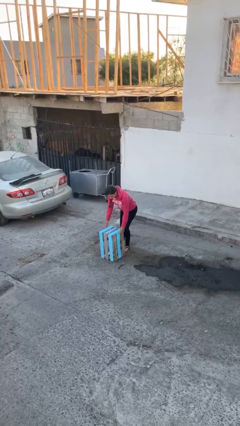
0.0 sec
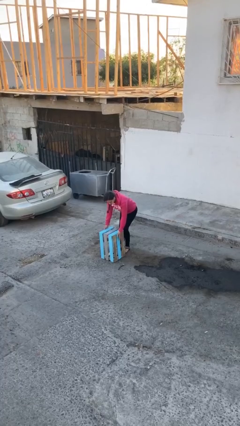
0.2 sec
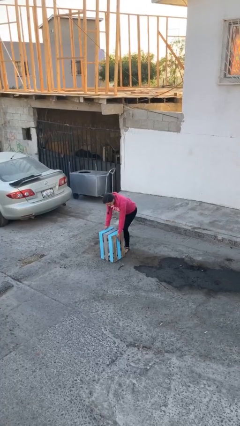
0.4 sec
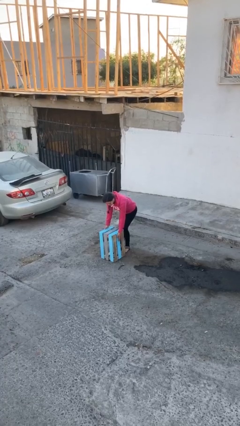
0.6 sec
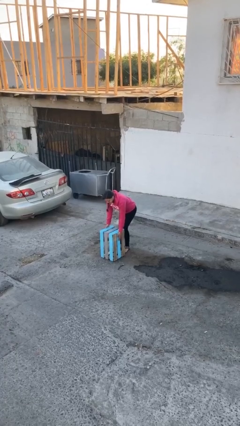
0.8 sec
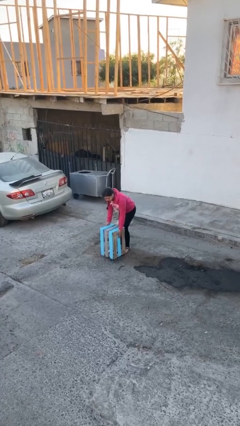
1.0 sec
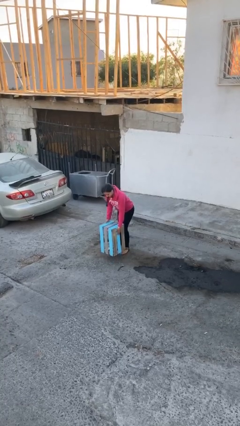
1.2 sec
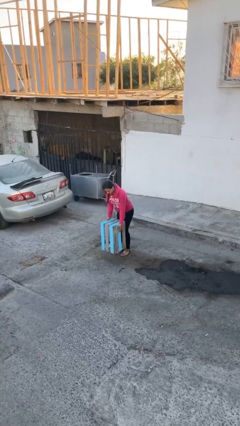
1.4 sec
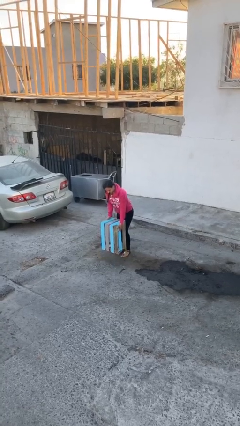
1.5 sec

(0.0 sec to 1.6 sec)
person picks up object from floor

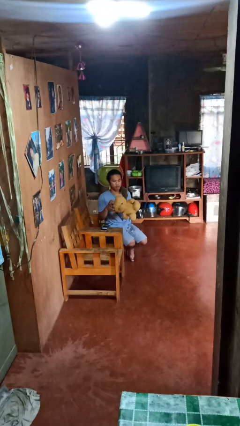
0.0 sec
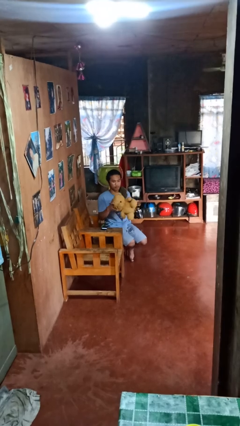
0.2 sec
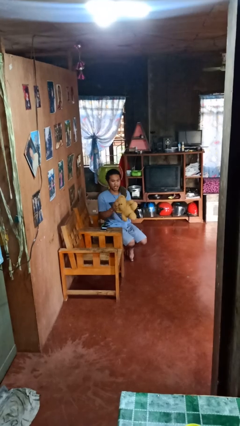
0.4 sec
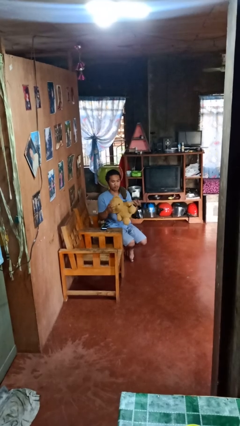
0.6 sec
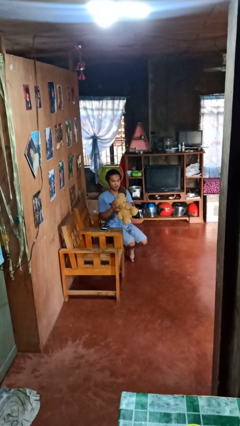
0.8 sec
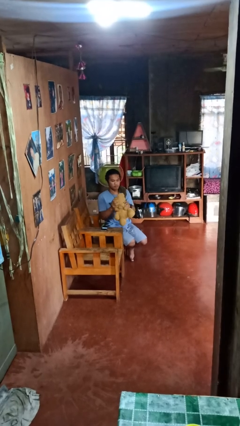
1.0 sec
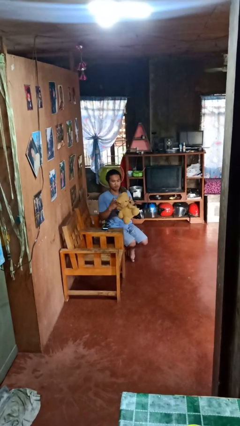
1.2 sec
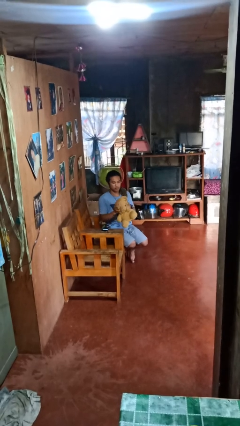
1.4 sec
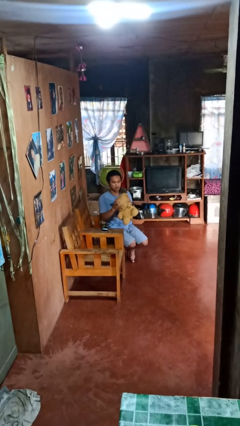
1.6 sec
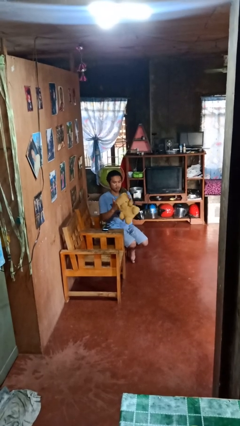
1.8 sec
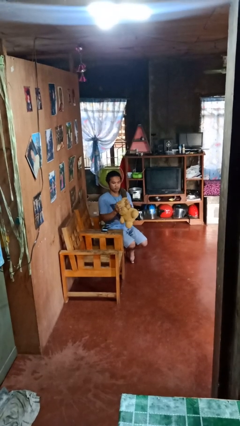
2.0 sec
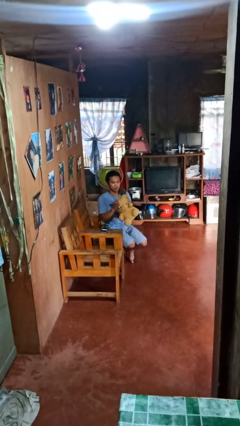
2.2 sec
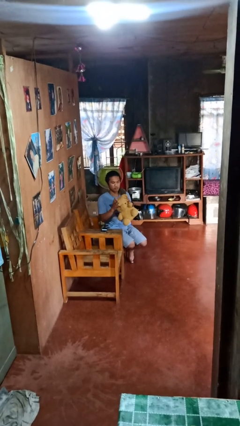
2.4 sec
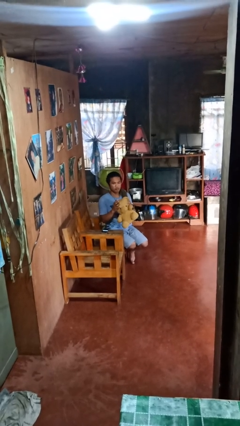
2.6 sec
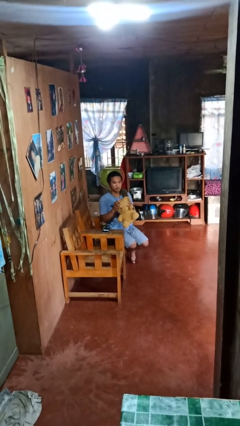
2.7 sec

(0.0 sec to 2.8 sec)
person squeezes object

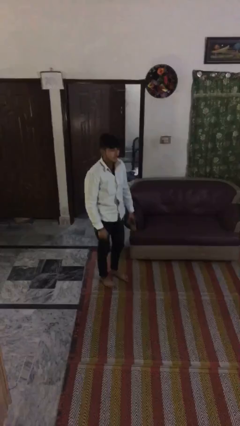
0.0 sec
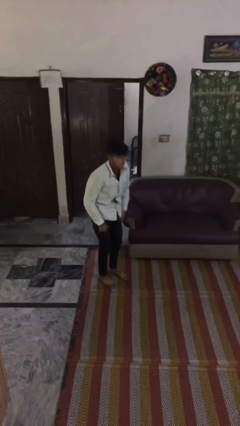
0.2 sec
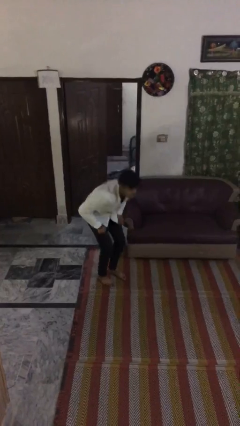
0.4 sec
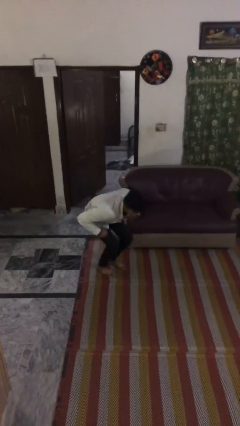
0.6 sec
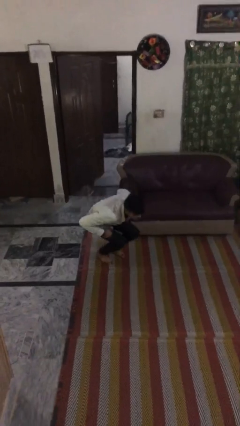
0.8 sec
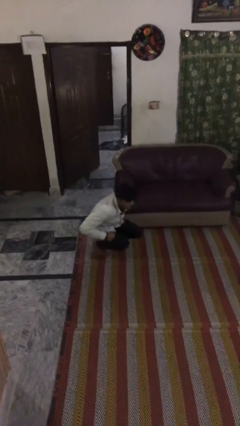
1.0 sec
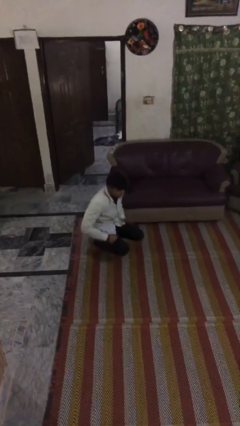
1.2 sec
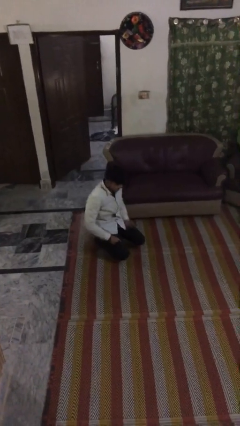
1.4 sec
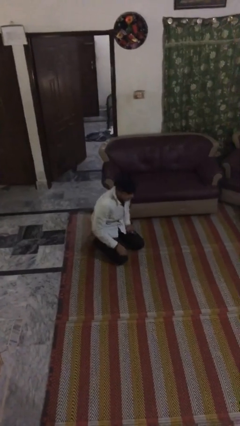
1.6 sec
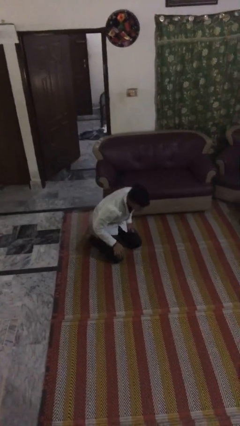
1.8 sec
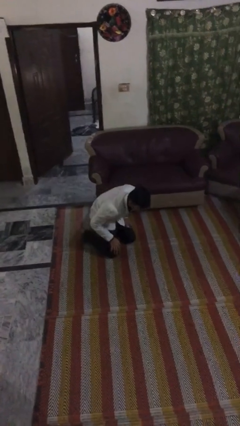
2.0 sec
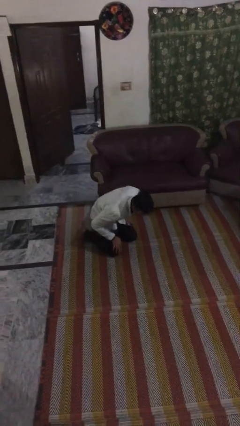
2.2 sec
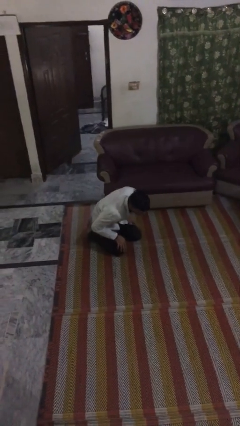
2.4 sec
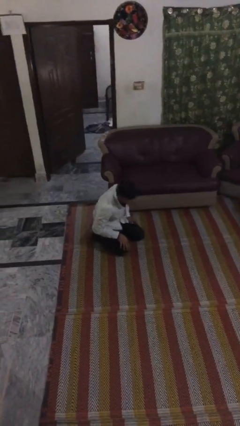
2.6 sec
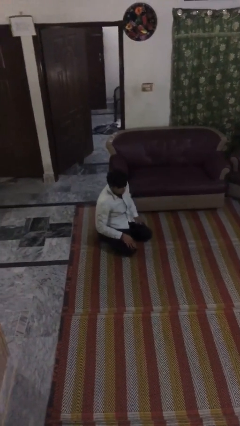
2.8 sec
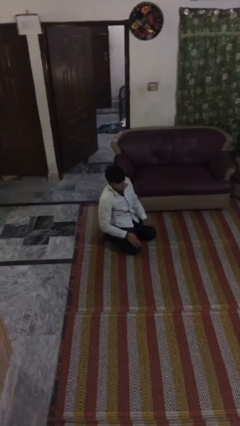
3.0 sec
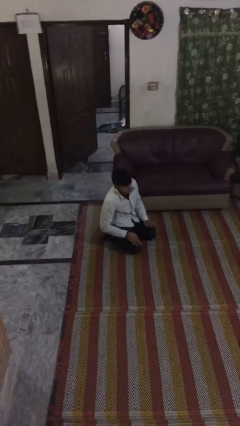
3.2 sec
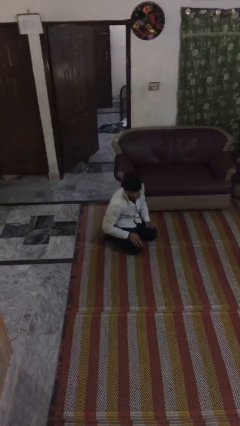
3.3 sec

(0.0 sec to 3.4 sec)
person sits down

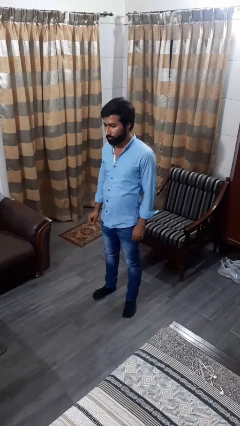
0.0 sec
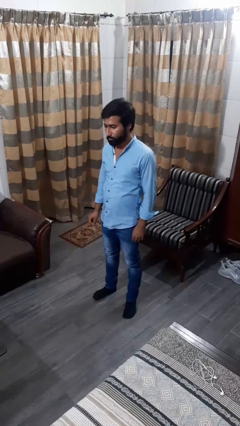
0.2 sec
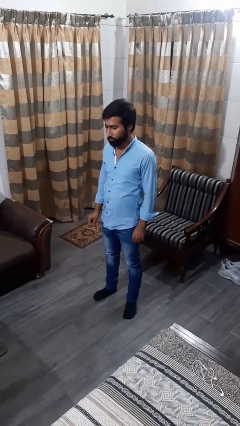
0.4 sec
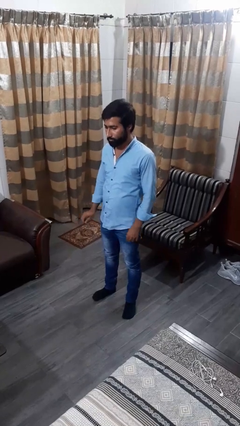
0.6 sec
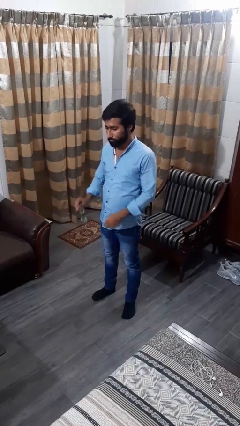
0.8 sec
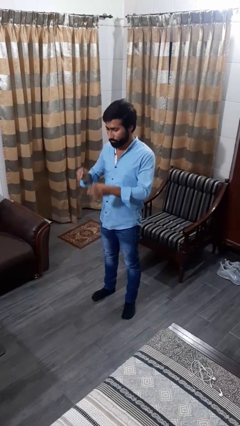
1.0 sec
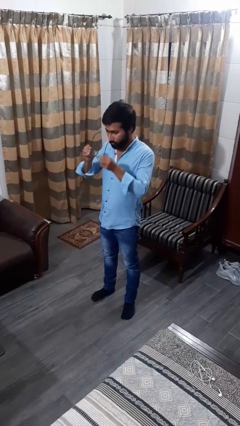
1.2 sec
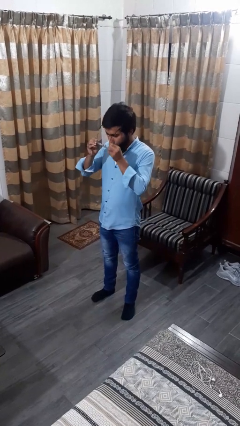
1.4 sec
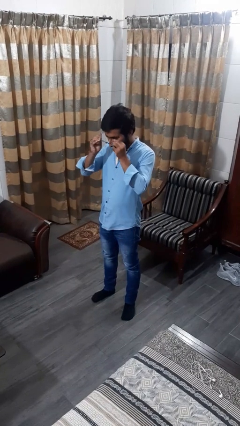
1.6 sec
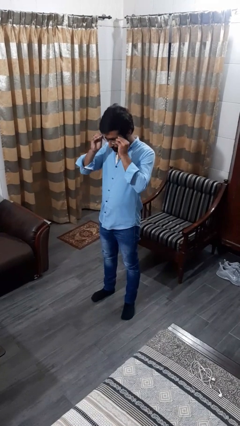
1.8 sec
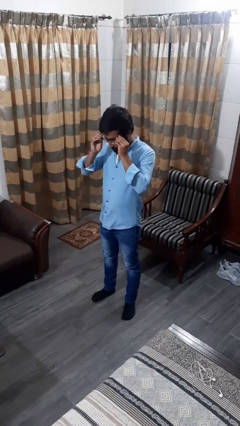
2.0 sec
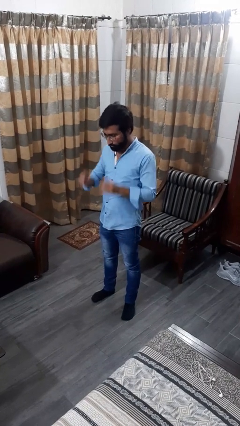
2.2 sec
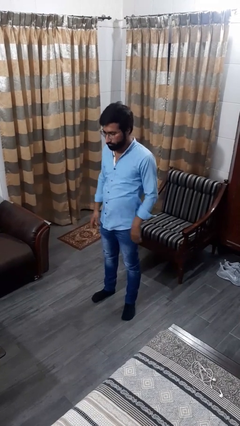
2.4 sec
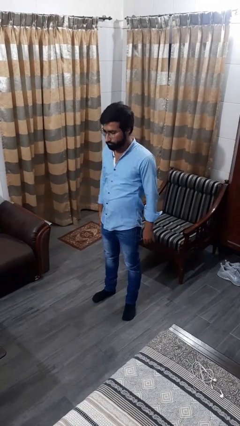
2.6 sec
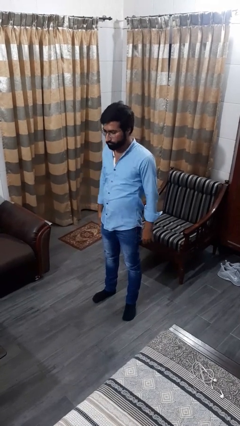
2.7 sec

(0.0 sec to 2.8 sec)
person puts on glasses

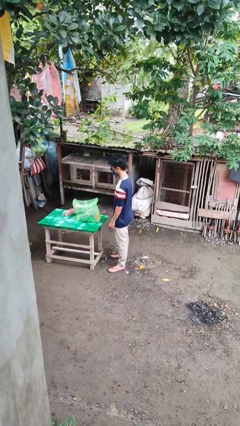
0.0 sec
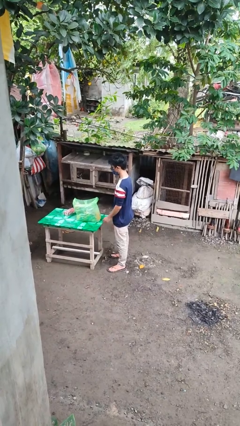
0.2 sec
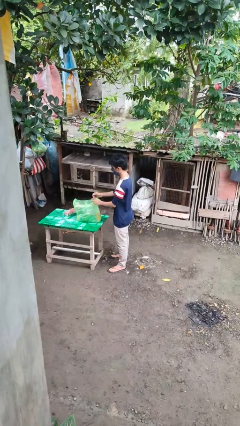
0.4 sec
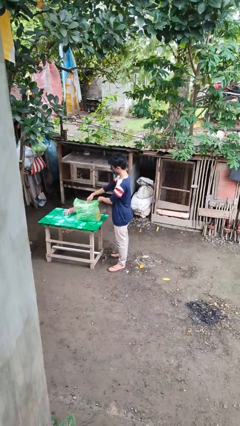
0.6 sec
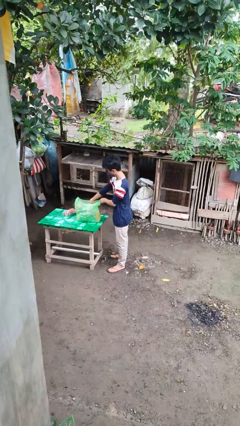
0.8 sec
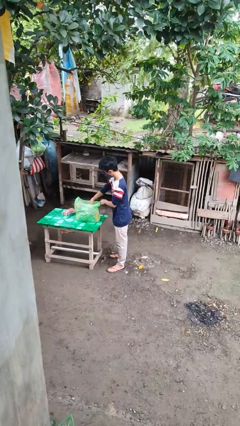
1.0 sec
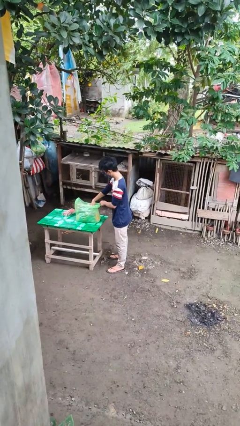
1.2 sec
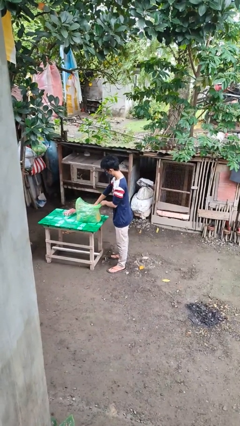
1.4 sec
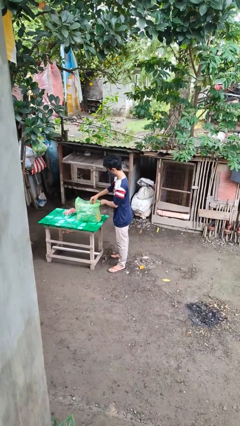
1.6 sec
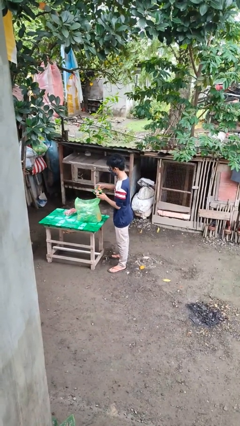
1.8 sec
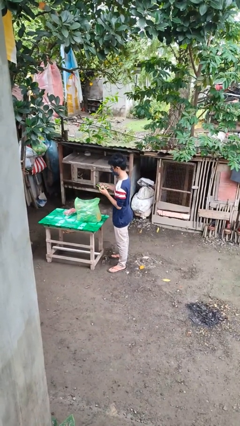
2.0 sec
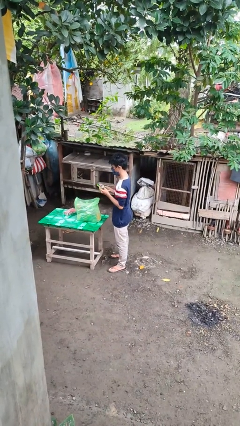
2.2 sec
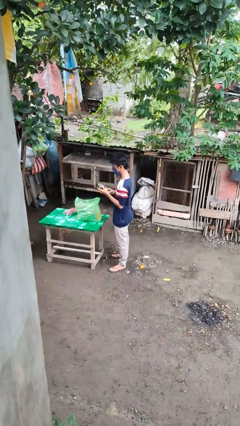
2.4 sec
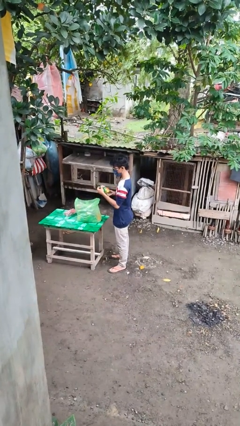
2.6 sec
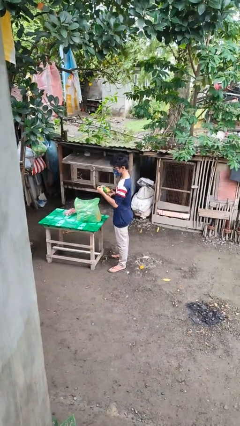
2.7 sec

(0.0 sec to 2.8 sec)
person takes object from bag

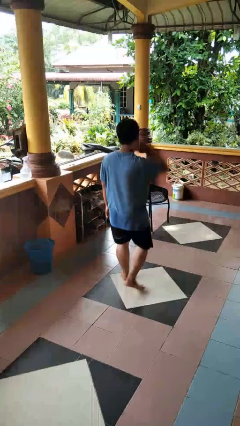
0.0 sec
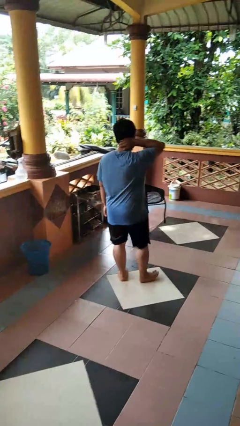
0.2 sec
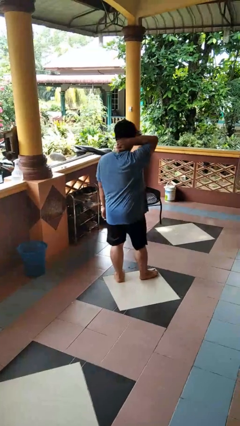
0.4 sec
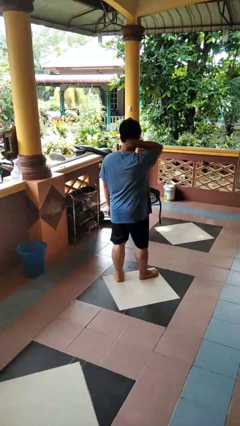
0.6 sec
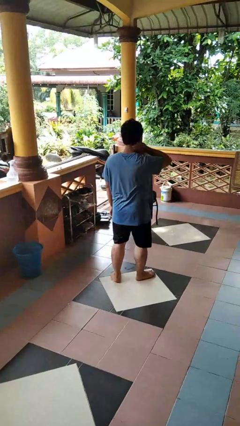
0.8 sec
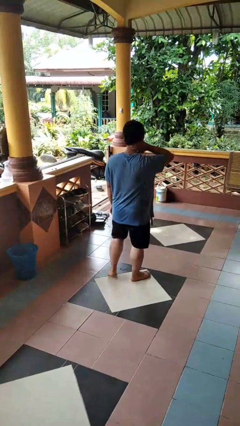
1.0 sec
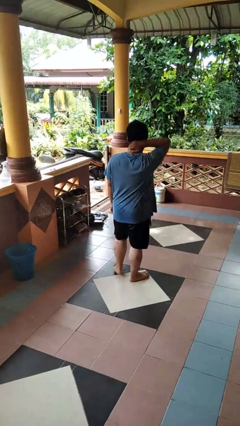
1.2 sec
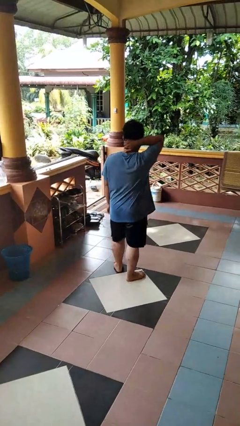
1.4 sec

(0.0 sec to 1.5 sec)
person rubs neck

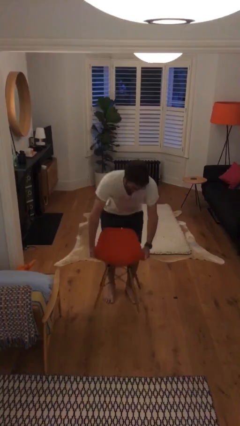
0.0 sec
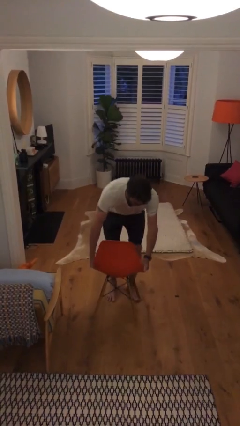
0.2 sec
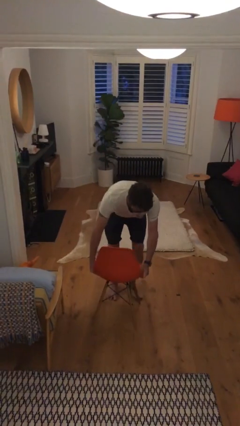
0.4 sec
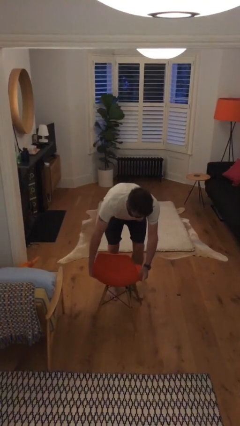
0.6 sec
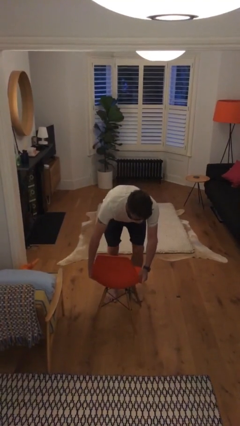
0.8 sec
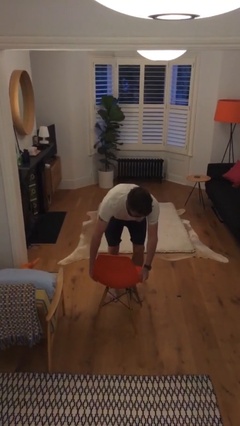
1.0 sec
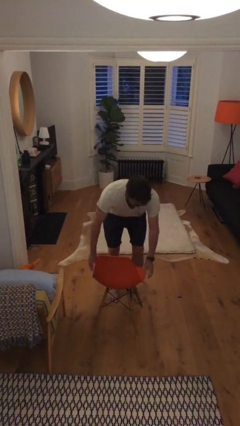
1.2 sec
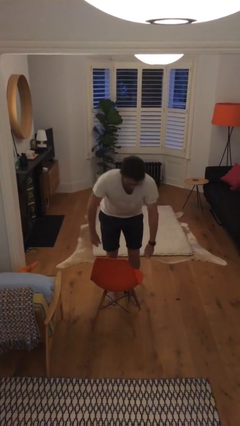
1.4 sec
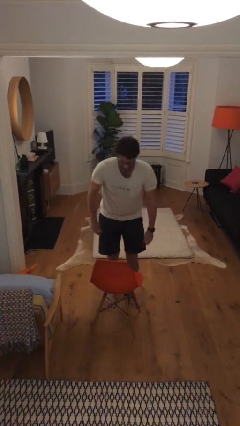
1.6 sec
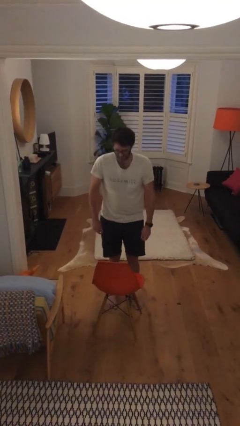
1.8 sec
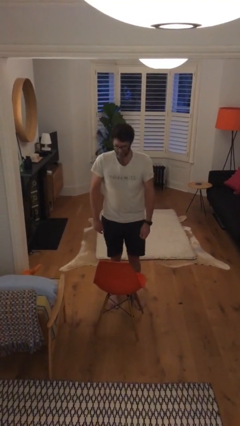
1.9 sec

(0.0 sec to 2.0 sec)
person puts down object on floor
